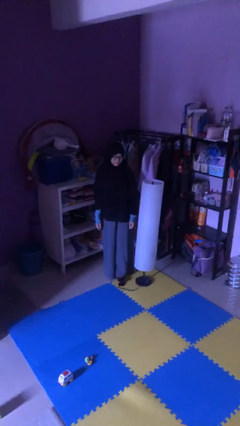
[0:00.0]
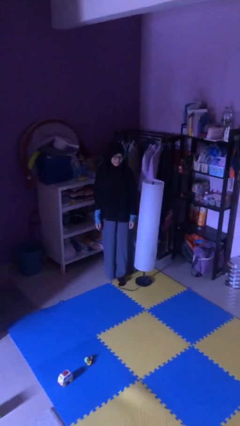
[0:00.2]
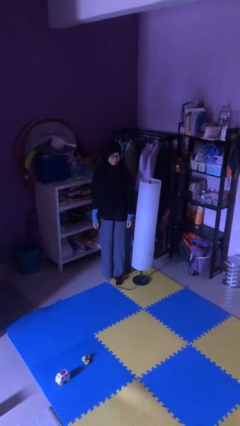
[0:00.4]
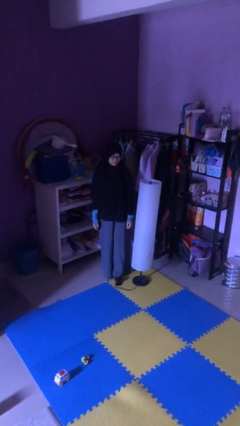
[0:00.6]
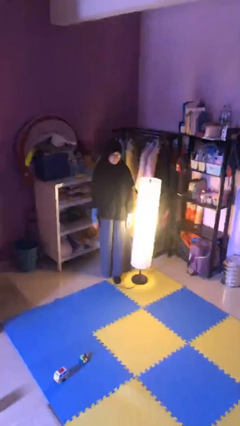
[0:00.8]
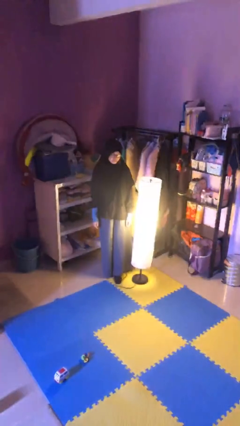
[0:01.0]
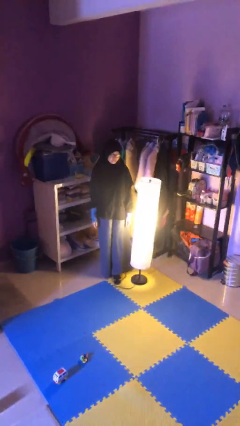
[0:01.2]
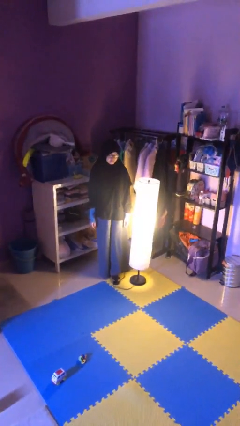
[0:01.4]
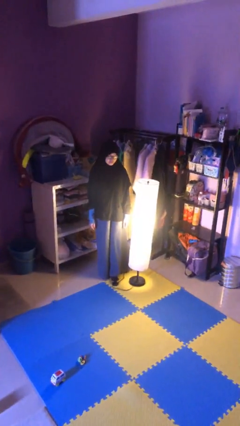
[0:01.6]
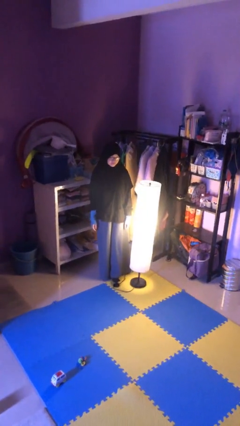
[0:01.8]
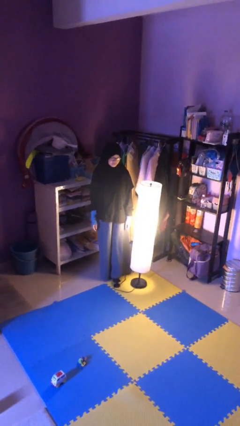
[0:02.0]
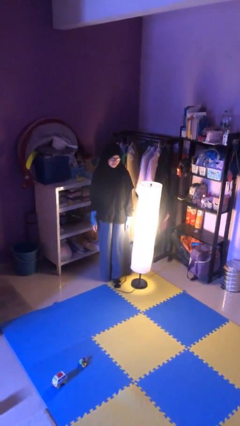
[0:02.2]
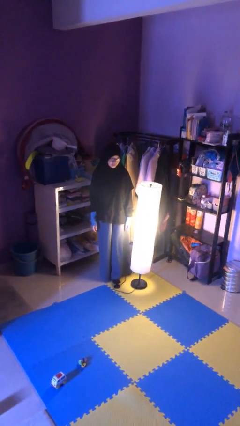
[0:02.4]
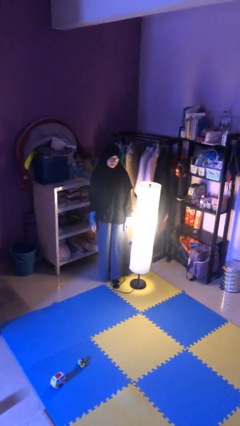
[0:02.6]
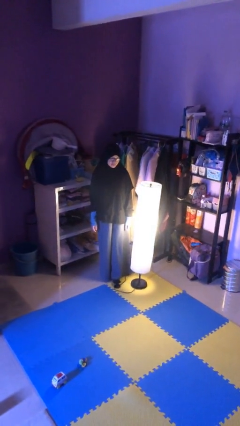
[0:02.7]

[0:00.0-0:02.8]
person turns on lamp

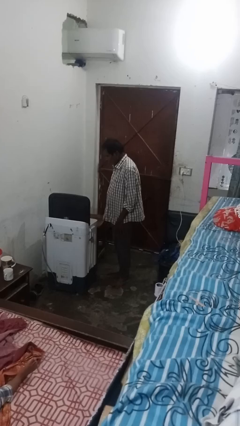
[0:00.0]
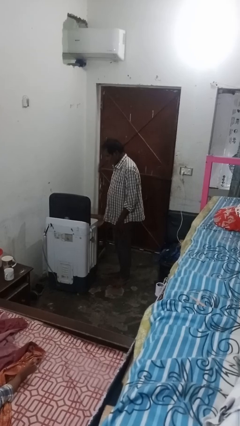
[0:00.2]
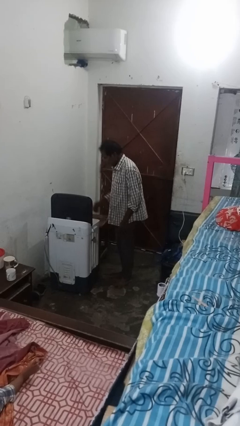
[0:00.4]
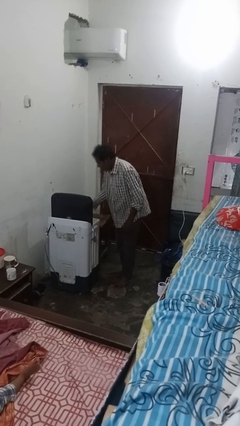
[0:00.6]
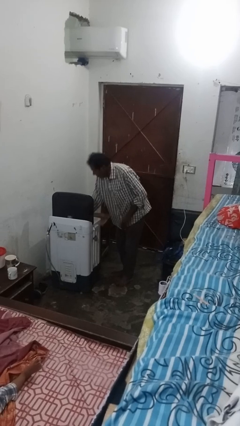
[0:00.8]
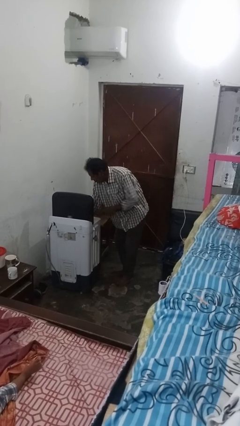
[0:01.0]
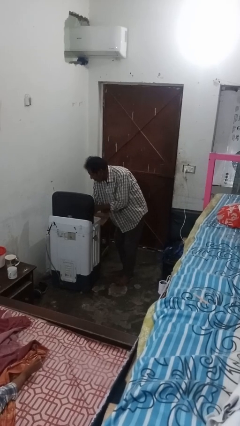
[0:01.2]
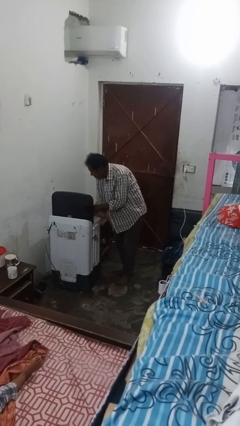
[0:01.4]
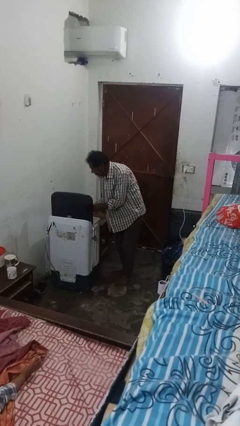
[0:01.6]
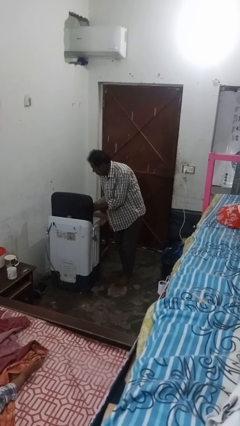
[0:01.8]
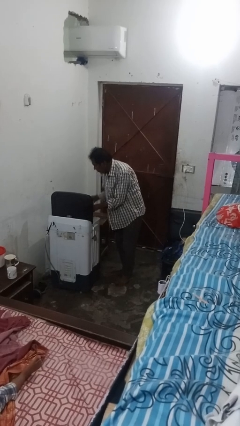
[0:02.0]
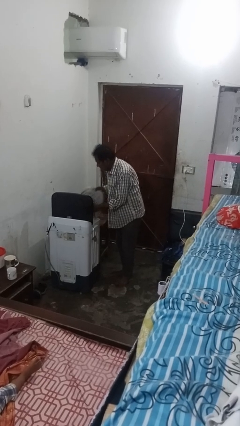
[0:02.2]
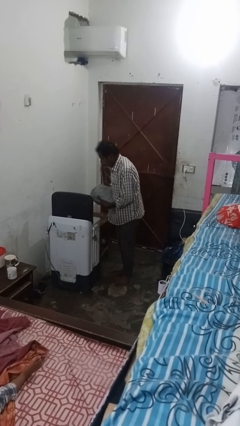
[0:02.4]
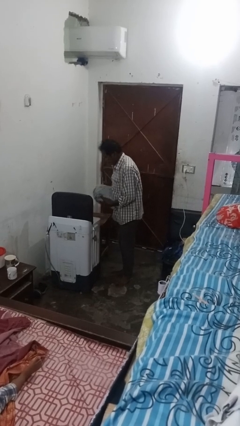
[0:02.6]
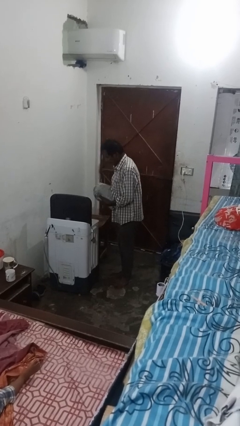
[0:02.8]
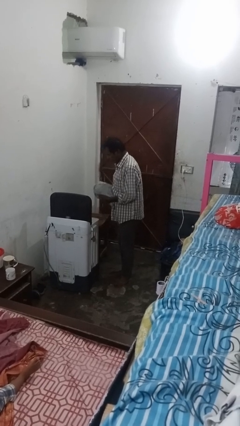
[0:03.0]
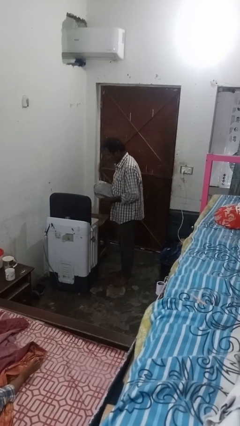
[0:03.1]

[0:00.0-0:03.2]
person unloads dryer

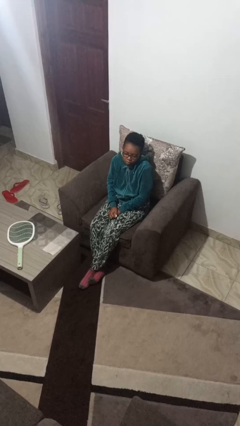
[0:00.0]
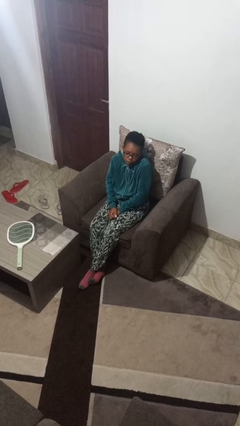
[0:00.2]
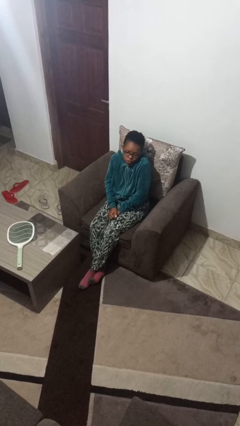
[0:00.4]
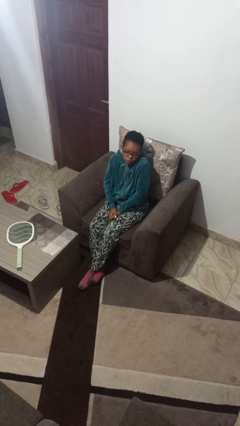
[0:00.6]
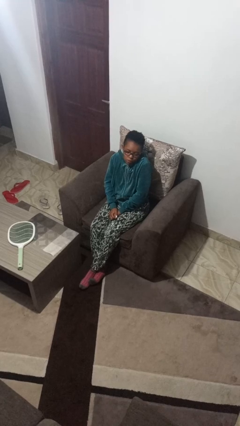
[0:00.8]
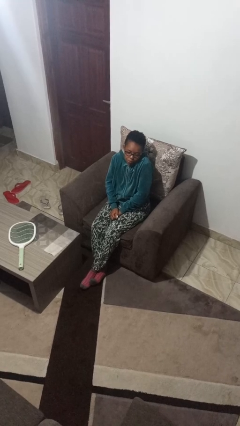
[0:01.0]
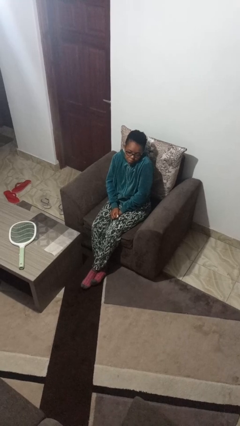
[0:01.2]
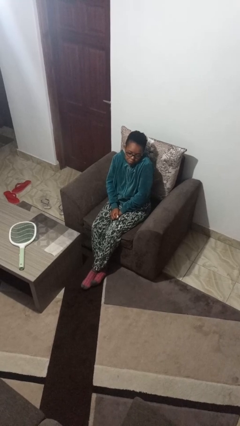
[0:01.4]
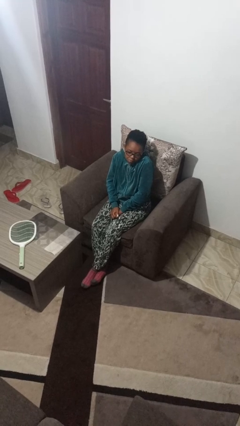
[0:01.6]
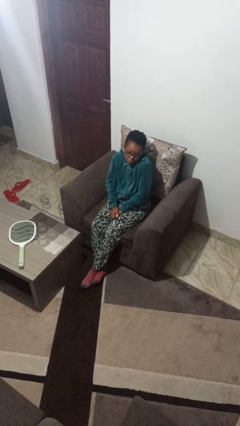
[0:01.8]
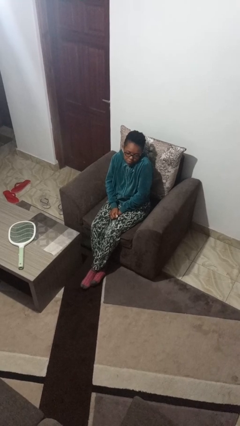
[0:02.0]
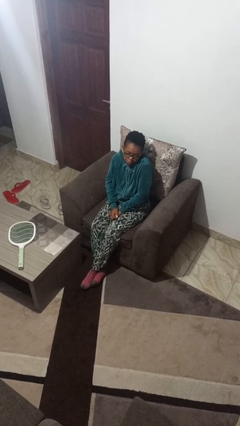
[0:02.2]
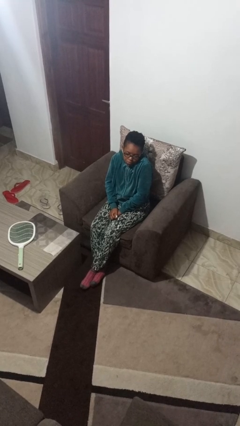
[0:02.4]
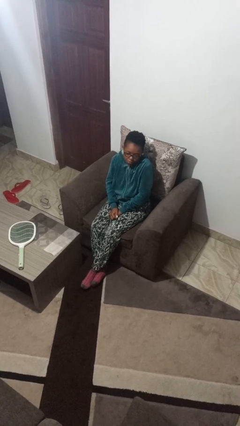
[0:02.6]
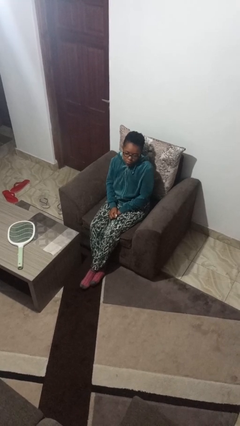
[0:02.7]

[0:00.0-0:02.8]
person shrugs

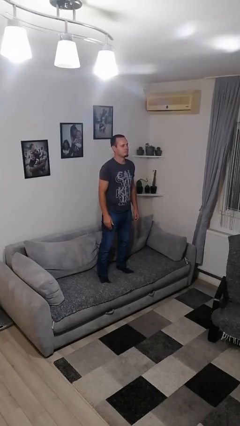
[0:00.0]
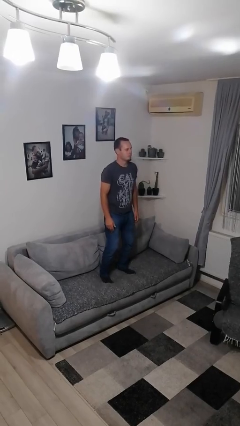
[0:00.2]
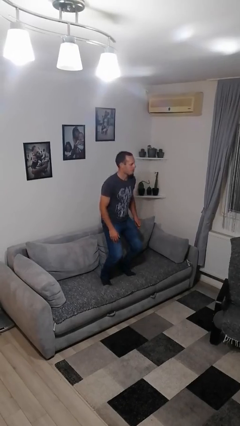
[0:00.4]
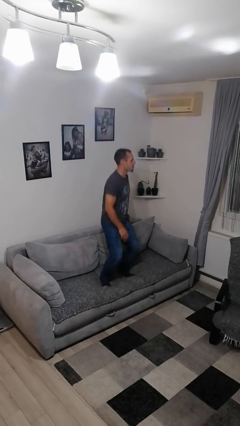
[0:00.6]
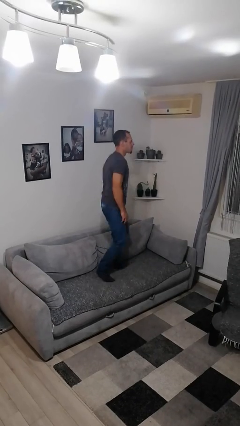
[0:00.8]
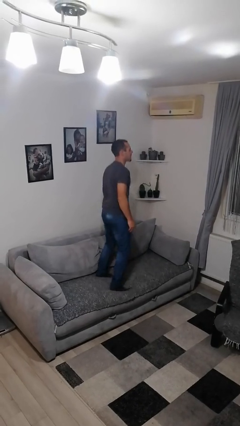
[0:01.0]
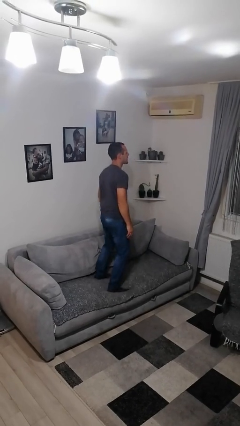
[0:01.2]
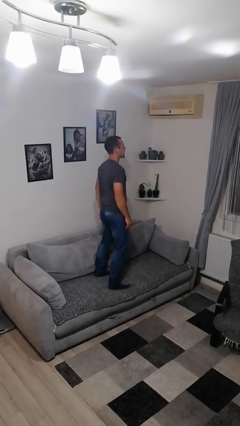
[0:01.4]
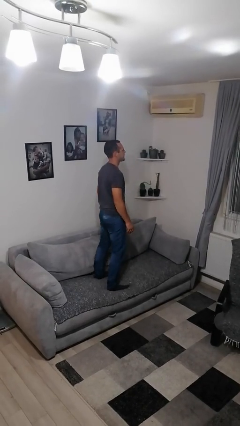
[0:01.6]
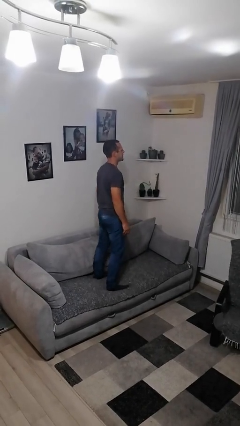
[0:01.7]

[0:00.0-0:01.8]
person jumps on couch

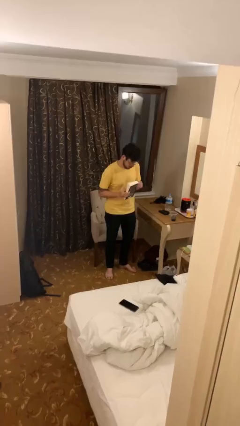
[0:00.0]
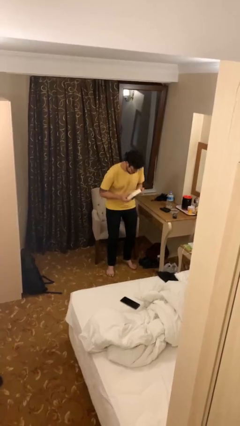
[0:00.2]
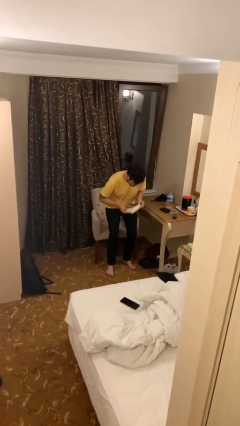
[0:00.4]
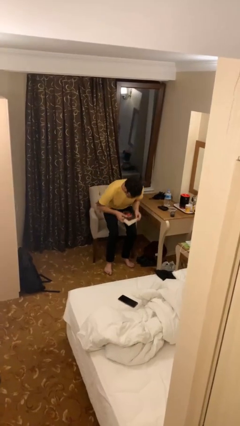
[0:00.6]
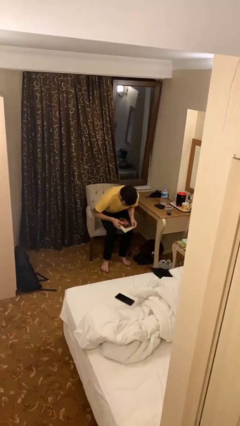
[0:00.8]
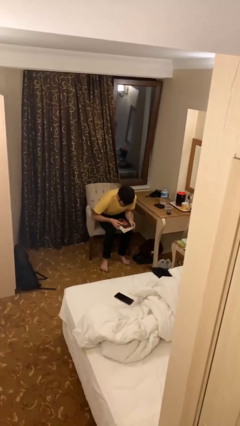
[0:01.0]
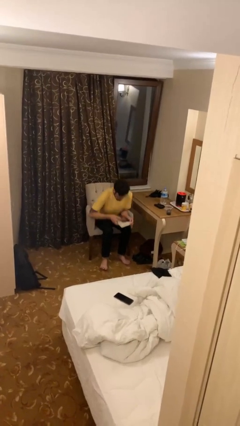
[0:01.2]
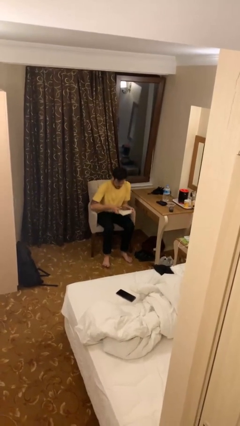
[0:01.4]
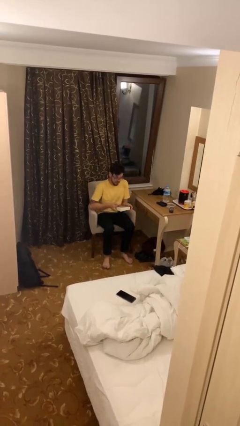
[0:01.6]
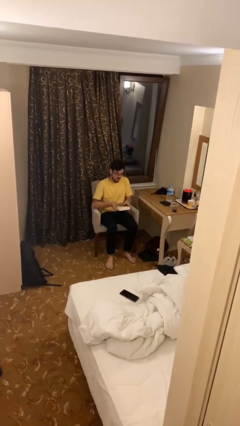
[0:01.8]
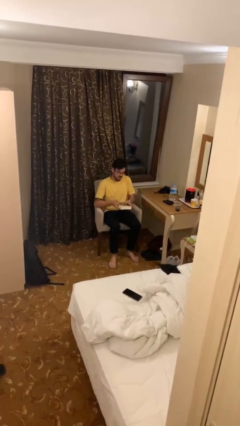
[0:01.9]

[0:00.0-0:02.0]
person sits down

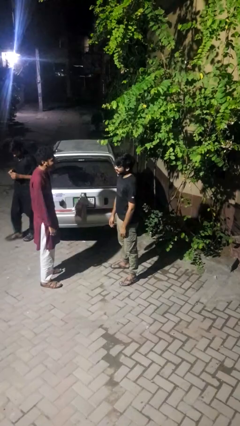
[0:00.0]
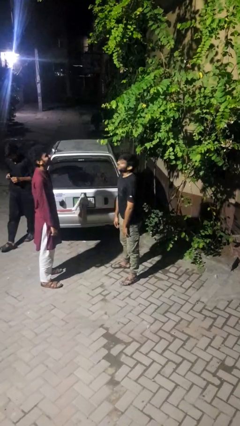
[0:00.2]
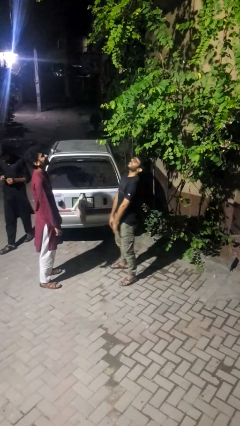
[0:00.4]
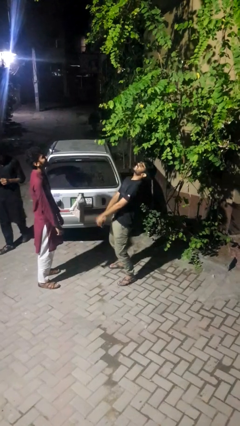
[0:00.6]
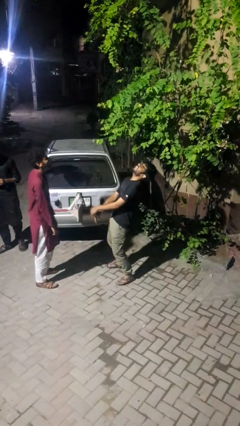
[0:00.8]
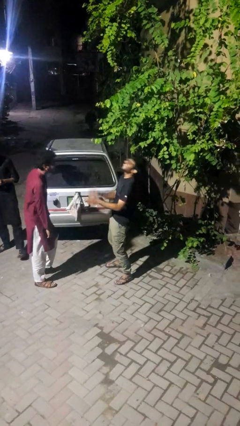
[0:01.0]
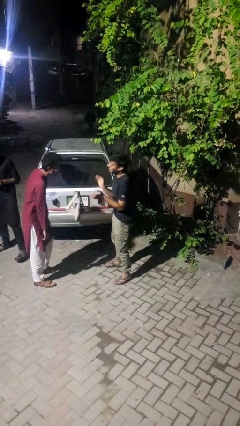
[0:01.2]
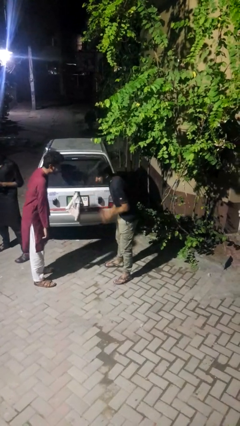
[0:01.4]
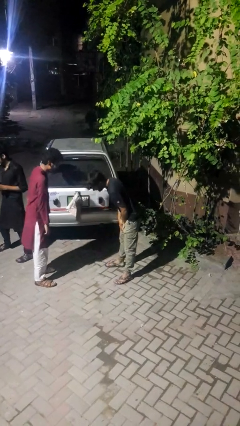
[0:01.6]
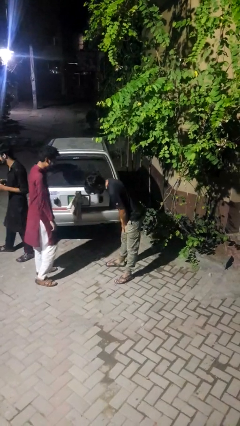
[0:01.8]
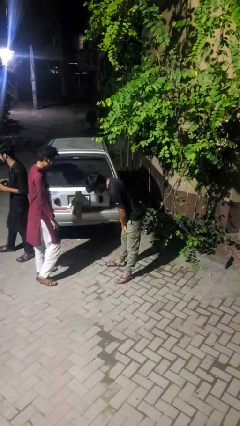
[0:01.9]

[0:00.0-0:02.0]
person laughs with person

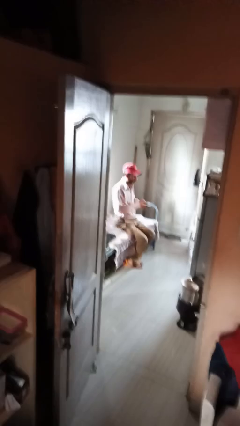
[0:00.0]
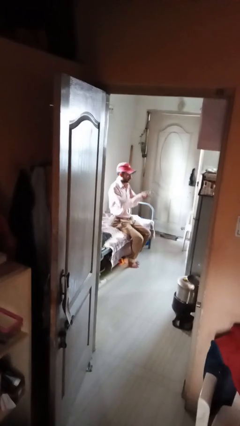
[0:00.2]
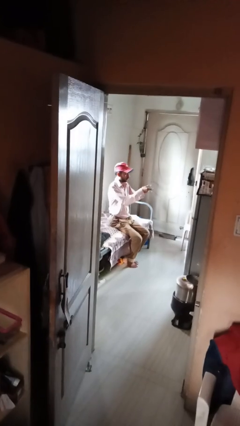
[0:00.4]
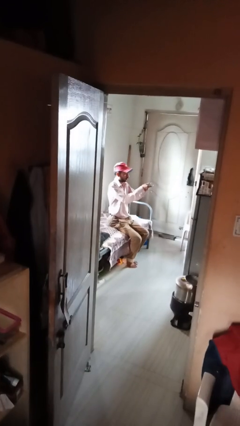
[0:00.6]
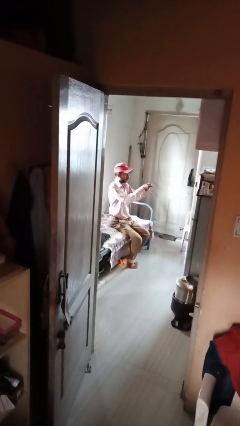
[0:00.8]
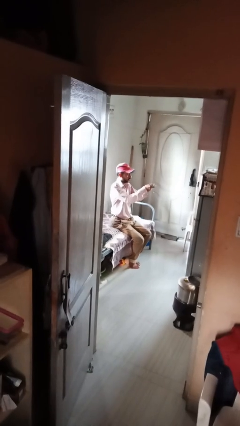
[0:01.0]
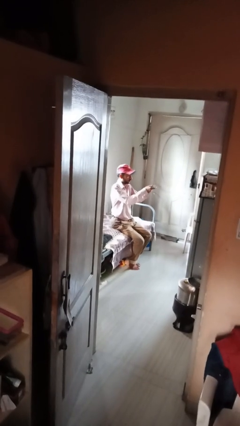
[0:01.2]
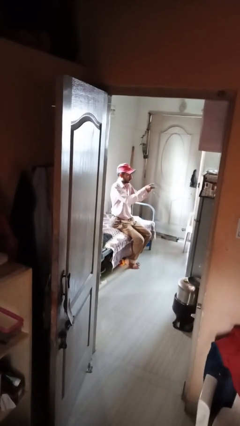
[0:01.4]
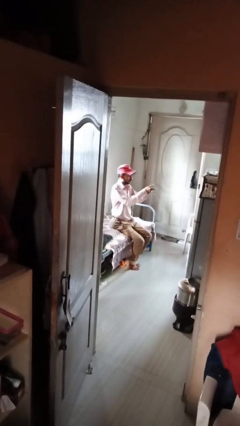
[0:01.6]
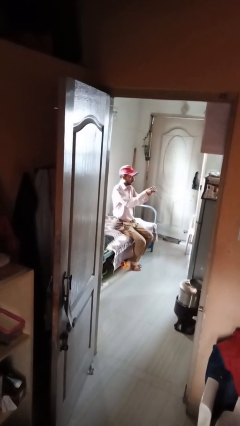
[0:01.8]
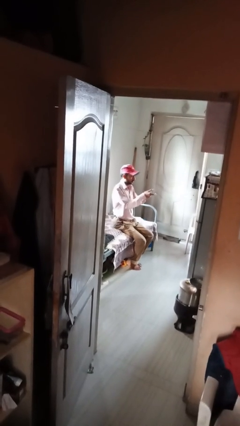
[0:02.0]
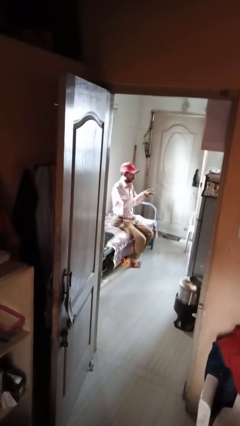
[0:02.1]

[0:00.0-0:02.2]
person clips fingernails

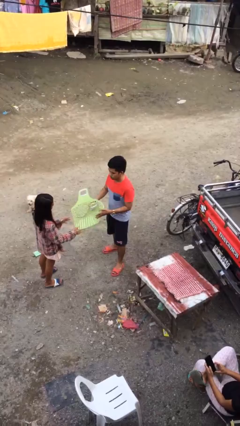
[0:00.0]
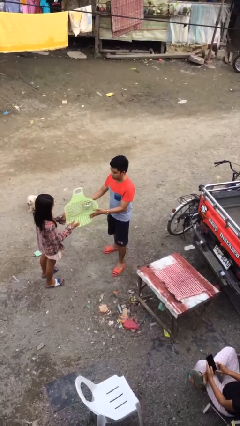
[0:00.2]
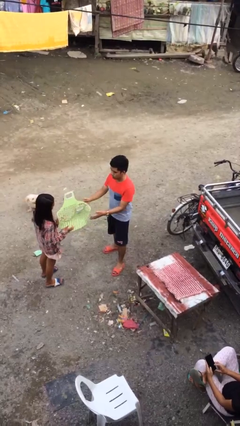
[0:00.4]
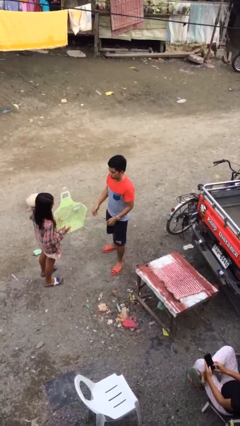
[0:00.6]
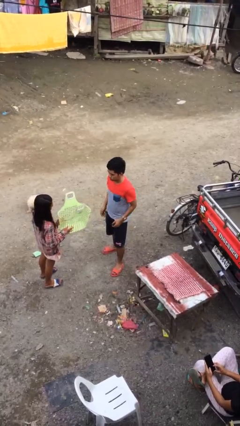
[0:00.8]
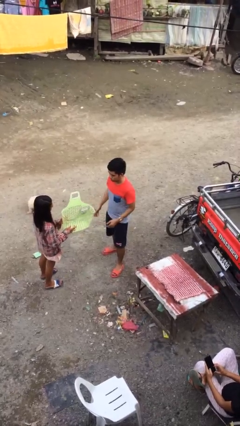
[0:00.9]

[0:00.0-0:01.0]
person transfers object to person
